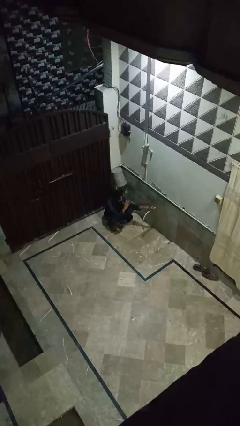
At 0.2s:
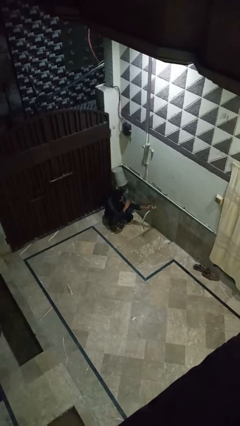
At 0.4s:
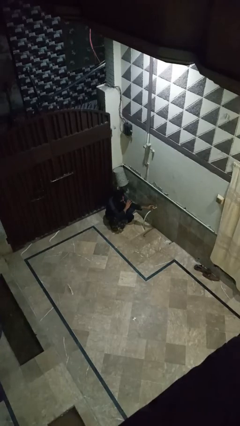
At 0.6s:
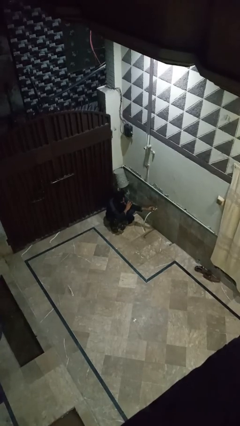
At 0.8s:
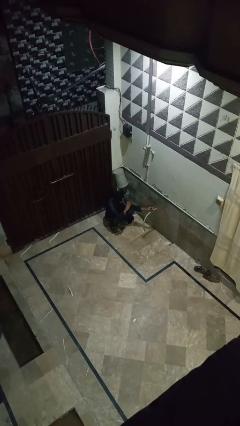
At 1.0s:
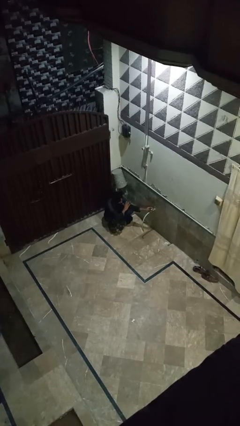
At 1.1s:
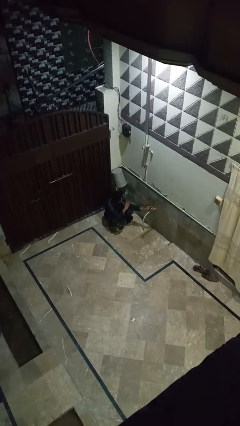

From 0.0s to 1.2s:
person turns on faucet

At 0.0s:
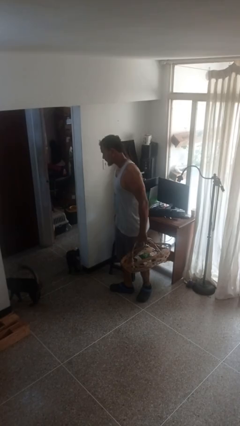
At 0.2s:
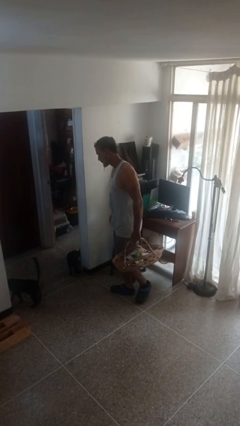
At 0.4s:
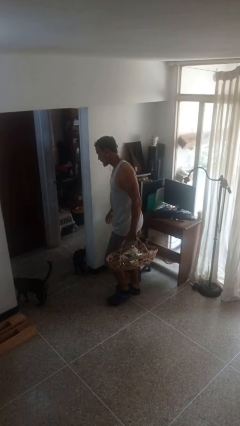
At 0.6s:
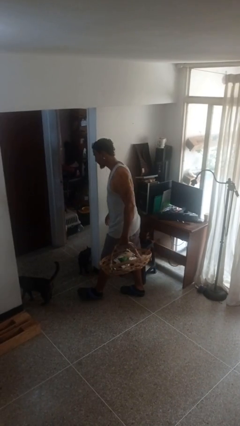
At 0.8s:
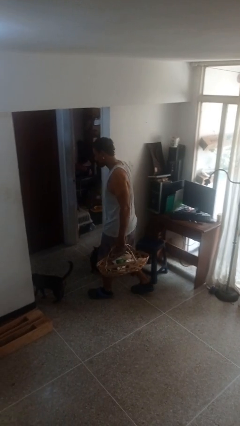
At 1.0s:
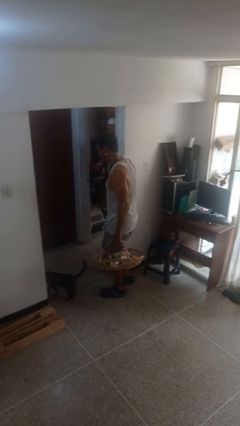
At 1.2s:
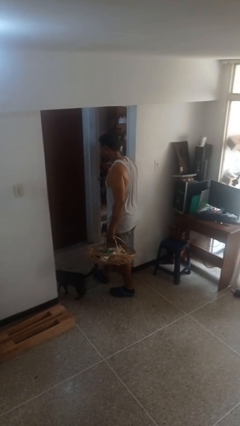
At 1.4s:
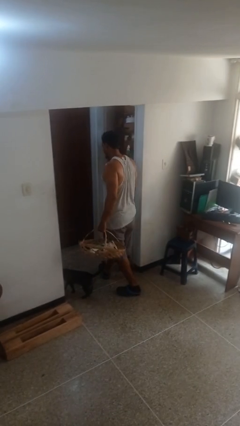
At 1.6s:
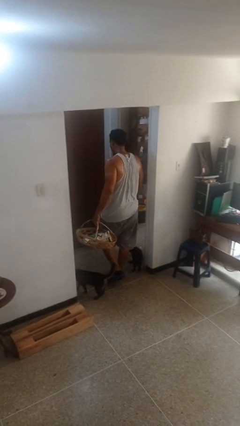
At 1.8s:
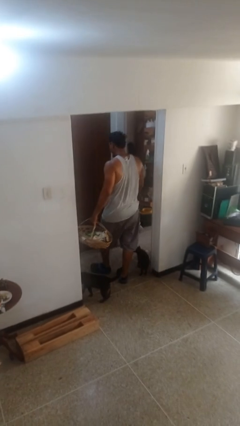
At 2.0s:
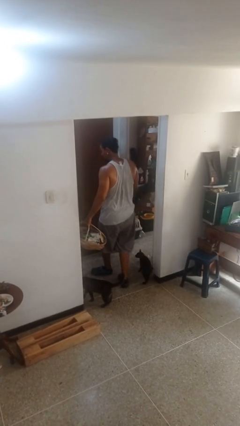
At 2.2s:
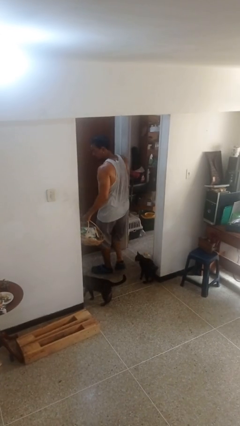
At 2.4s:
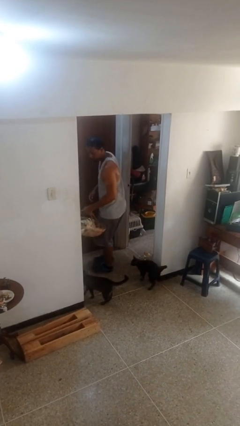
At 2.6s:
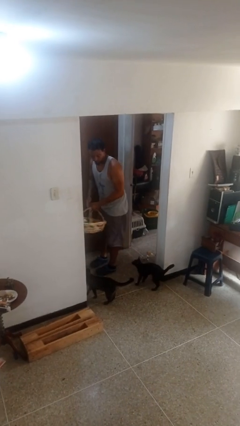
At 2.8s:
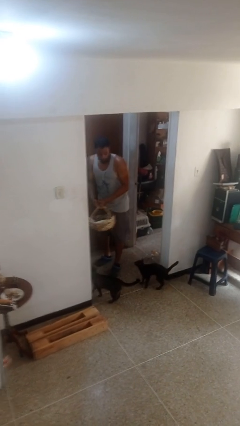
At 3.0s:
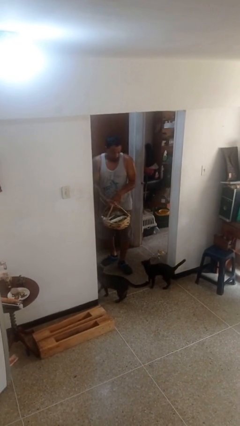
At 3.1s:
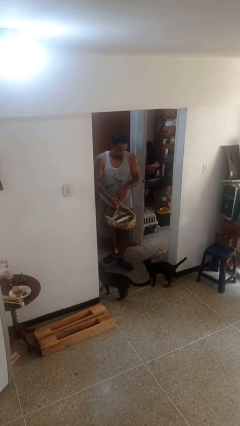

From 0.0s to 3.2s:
person carries groceries

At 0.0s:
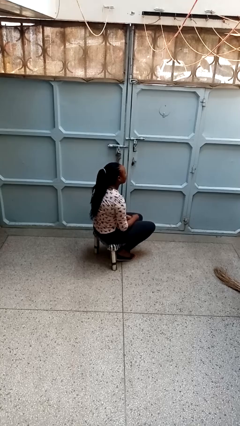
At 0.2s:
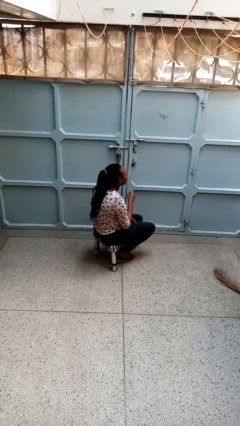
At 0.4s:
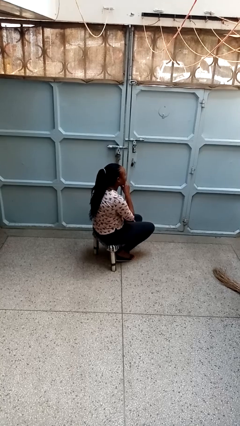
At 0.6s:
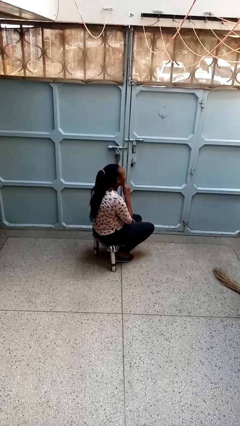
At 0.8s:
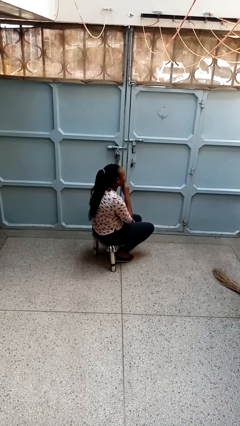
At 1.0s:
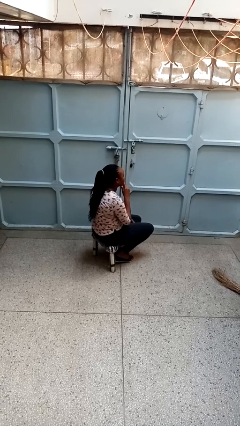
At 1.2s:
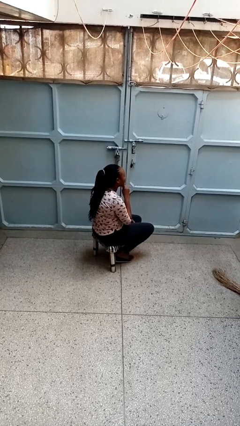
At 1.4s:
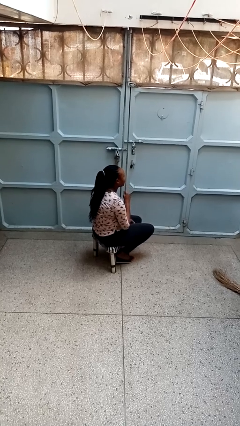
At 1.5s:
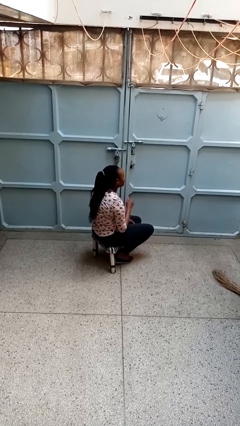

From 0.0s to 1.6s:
person strokes chin

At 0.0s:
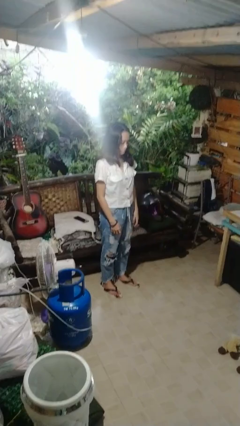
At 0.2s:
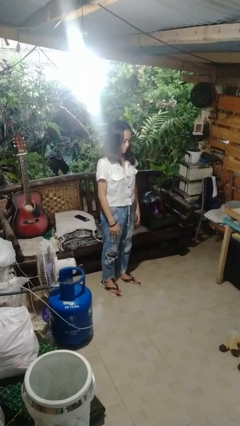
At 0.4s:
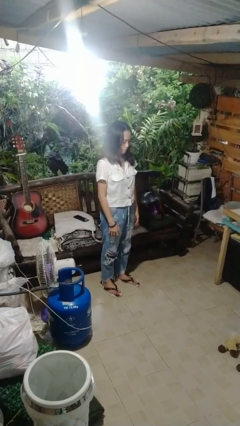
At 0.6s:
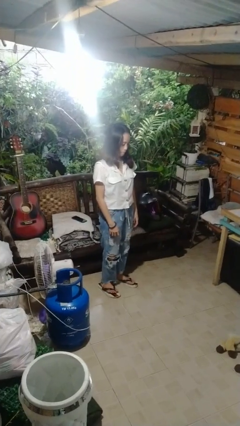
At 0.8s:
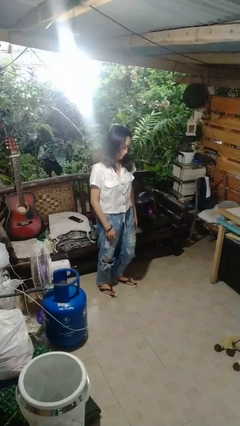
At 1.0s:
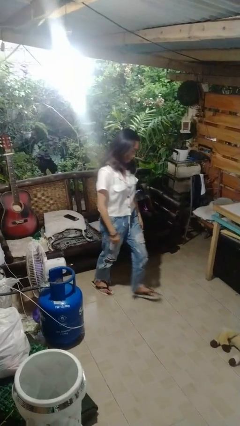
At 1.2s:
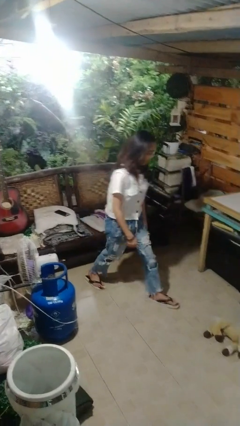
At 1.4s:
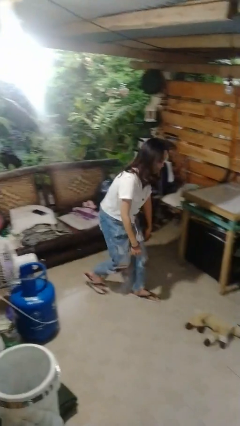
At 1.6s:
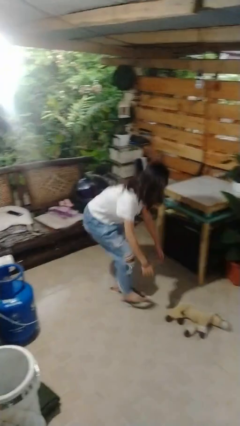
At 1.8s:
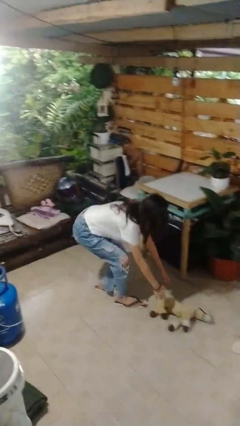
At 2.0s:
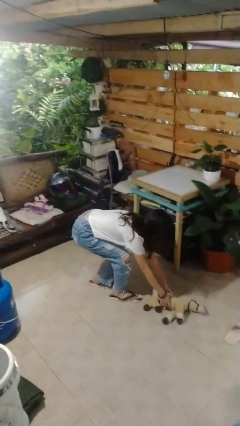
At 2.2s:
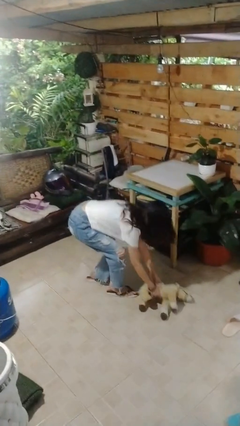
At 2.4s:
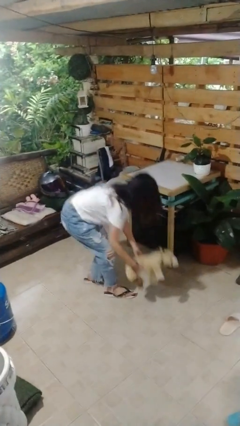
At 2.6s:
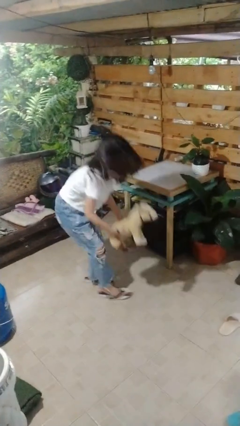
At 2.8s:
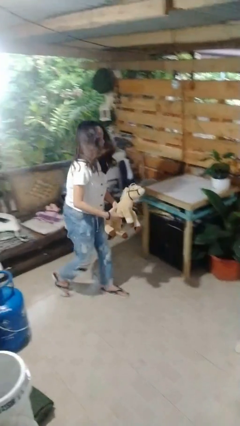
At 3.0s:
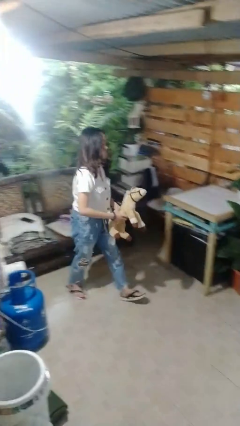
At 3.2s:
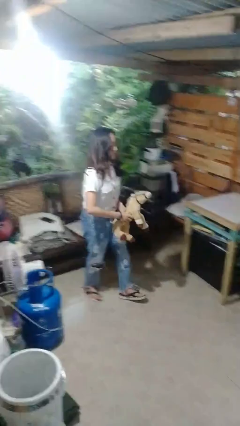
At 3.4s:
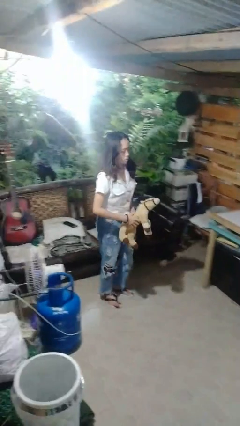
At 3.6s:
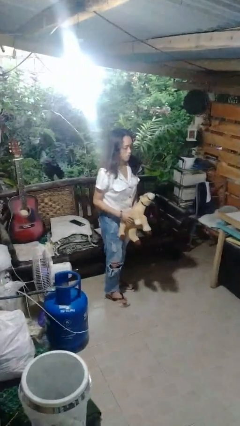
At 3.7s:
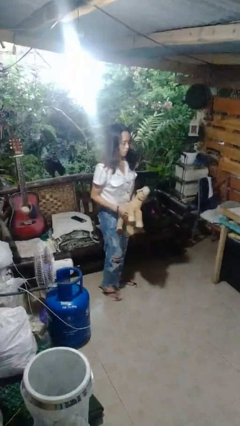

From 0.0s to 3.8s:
person picks up object from floor

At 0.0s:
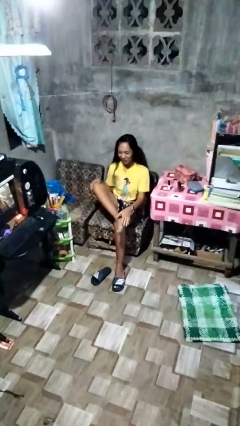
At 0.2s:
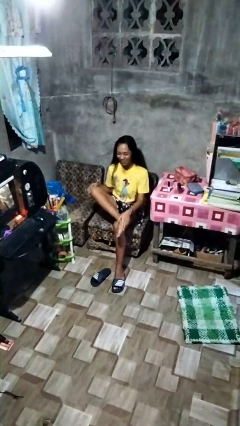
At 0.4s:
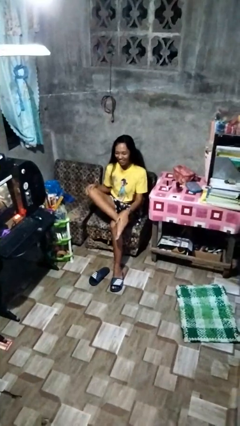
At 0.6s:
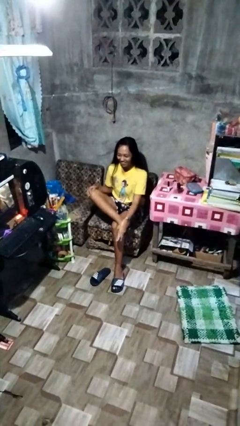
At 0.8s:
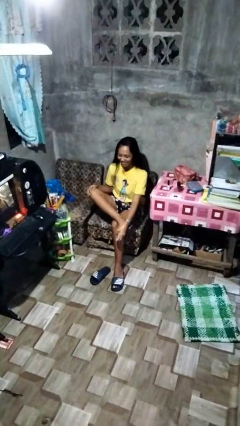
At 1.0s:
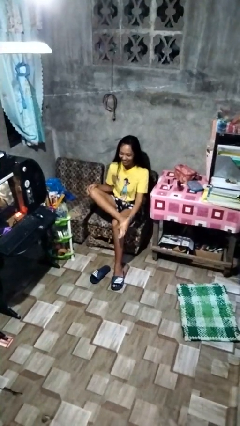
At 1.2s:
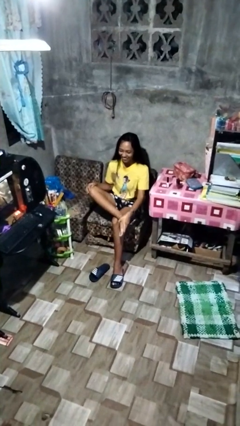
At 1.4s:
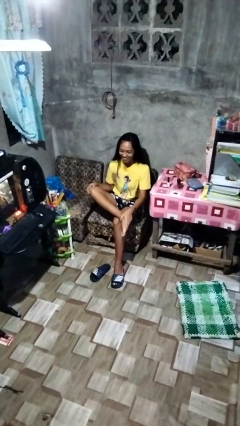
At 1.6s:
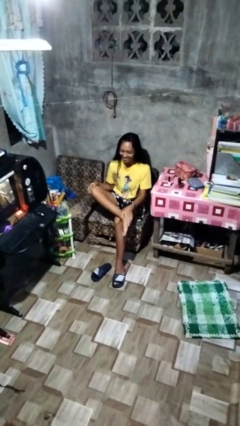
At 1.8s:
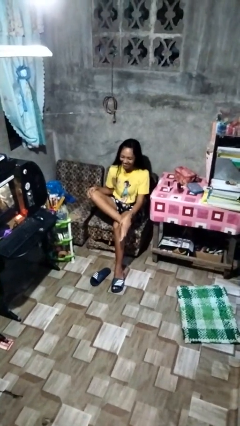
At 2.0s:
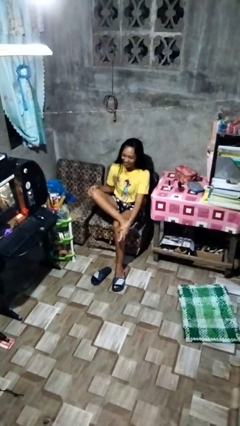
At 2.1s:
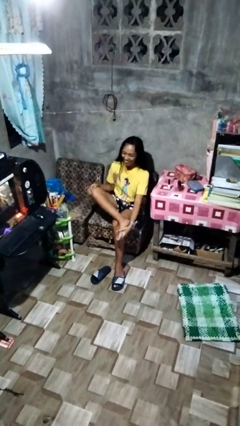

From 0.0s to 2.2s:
person rubs foot

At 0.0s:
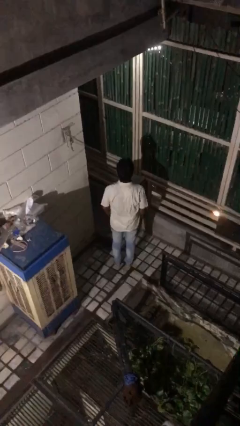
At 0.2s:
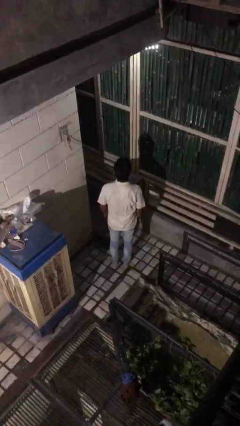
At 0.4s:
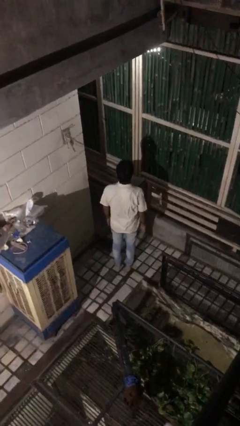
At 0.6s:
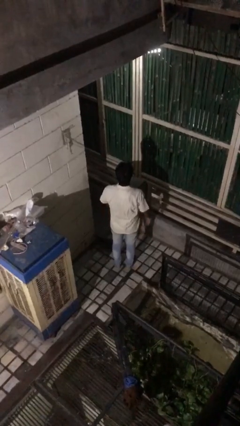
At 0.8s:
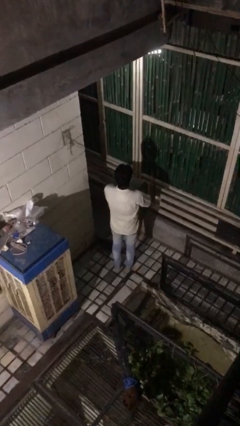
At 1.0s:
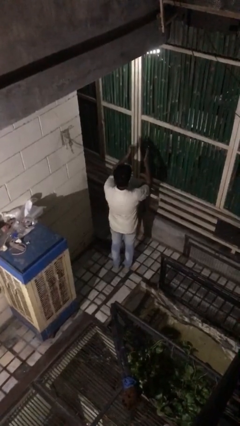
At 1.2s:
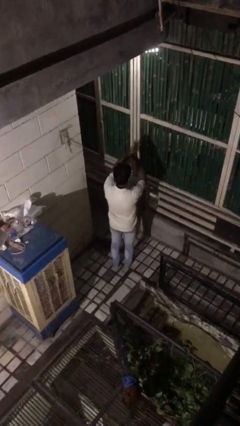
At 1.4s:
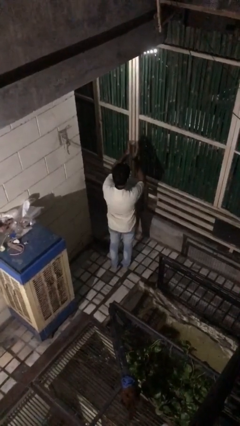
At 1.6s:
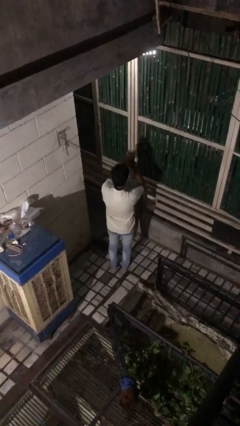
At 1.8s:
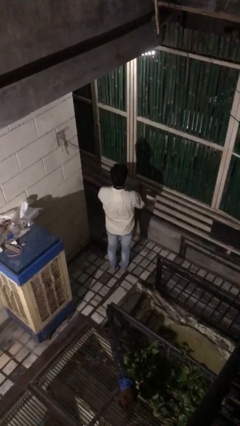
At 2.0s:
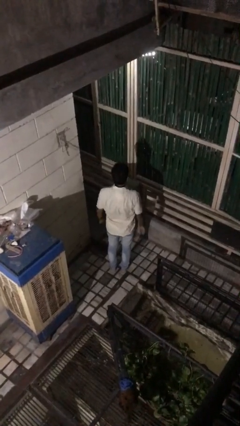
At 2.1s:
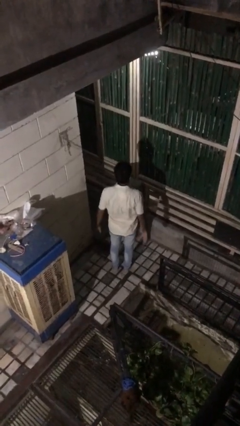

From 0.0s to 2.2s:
person claps hands

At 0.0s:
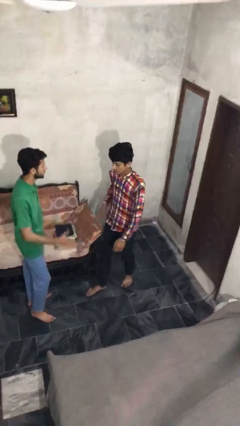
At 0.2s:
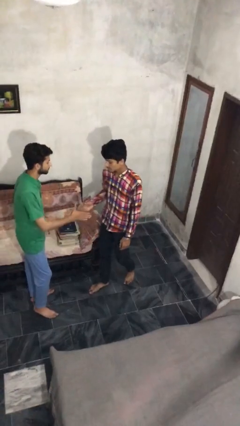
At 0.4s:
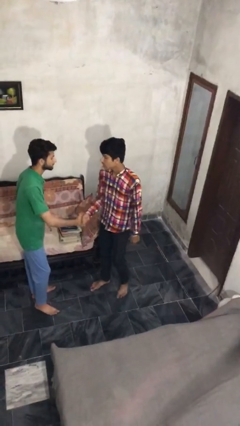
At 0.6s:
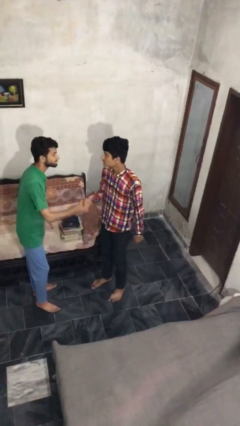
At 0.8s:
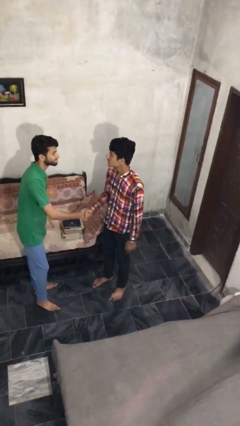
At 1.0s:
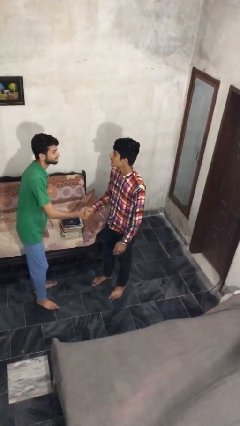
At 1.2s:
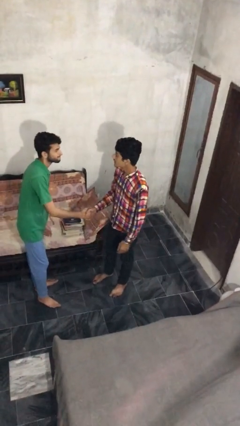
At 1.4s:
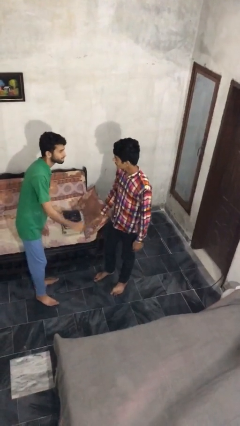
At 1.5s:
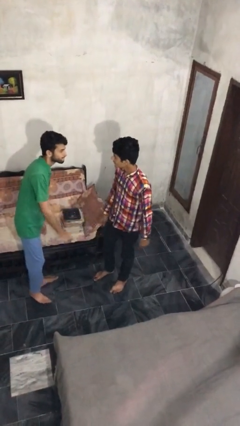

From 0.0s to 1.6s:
person shakes hand

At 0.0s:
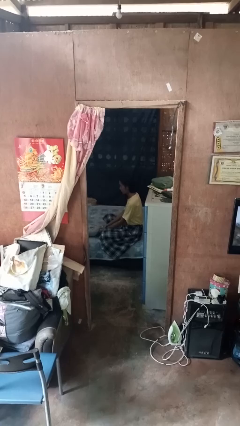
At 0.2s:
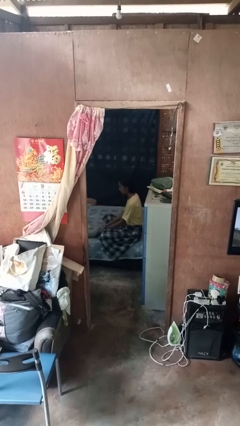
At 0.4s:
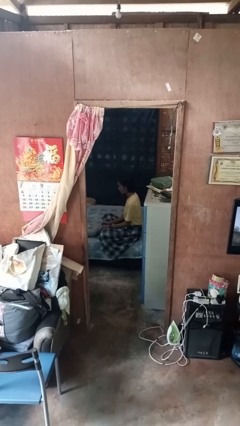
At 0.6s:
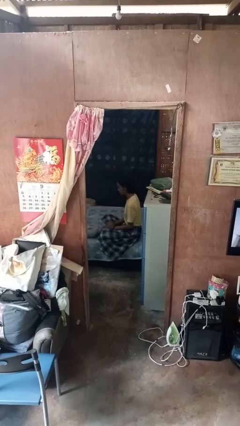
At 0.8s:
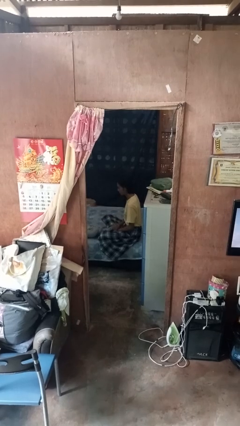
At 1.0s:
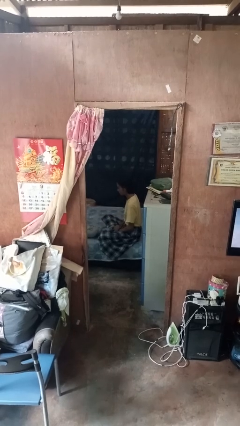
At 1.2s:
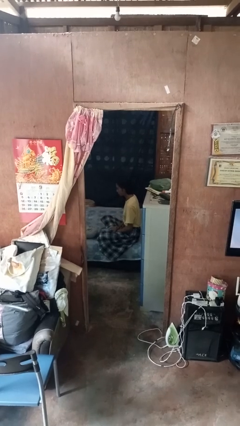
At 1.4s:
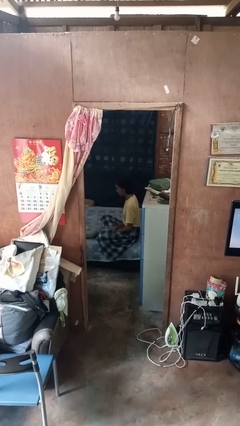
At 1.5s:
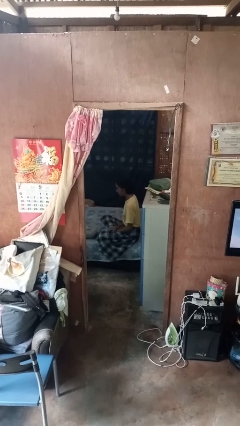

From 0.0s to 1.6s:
person puts down object on bed
